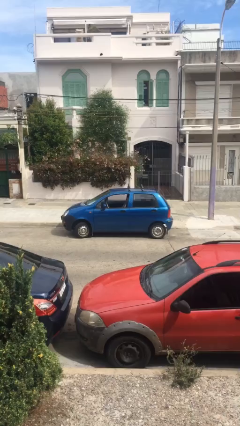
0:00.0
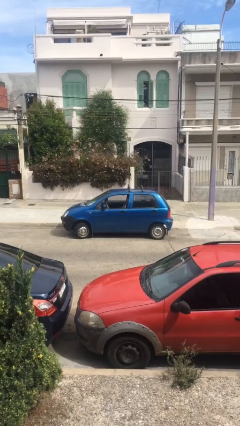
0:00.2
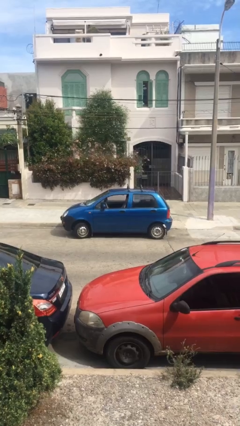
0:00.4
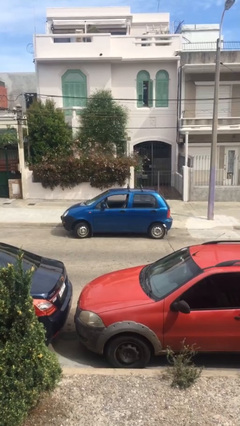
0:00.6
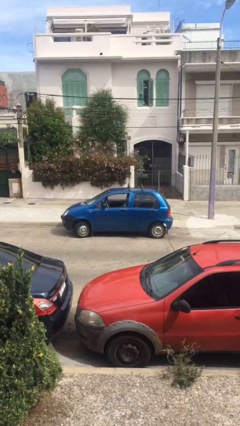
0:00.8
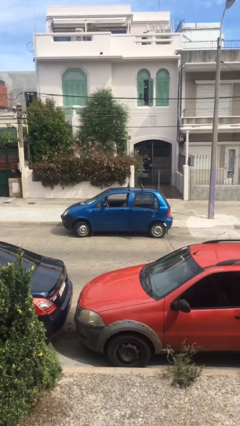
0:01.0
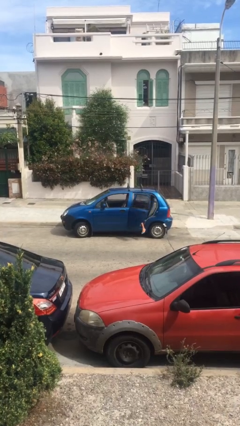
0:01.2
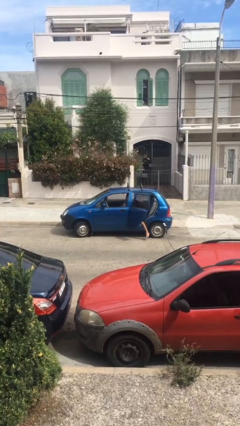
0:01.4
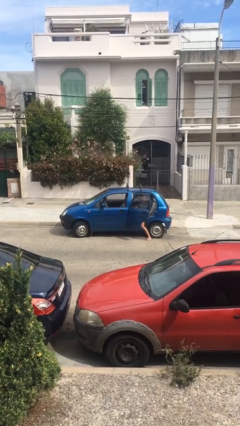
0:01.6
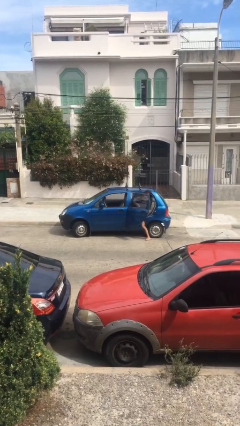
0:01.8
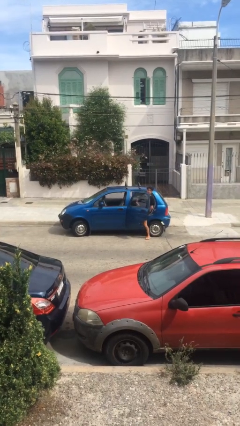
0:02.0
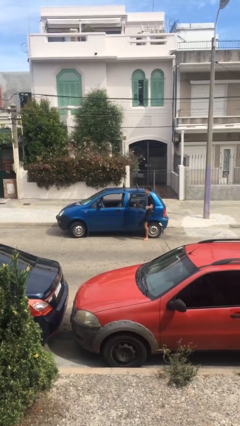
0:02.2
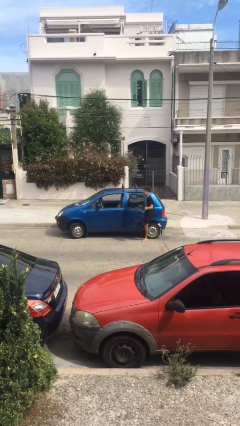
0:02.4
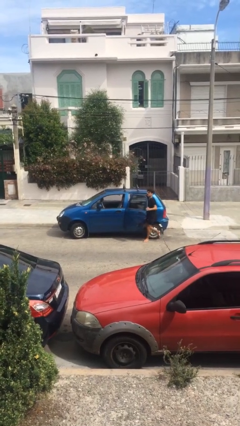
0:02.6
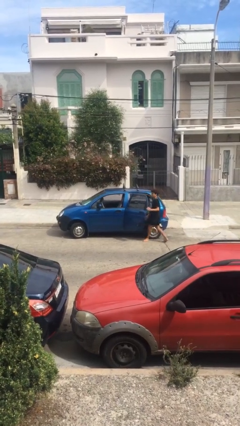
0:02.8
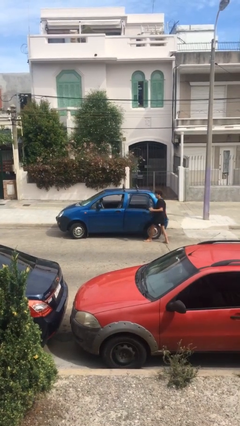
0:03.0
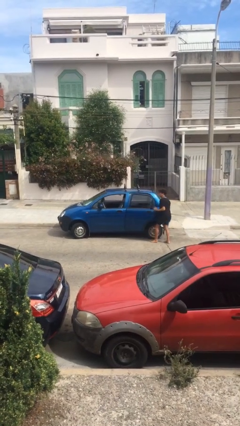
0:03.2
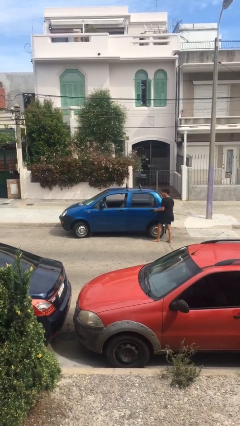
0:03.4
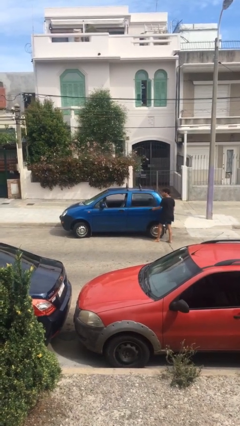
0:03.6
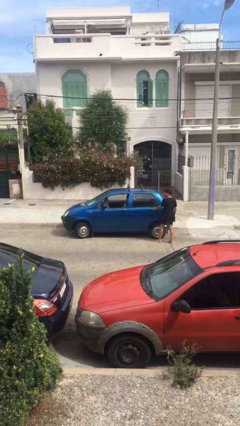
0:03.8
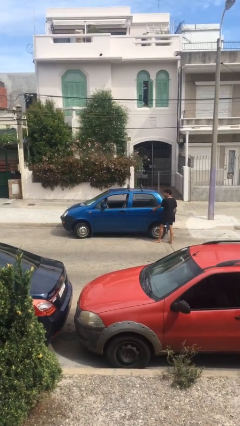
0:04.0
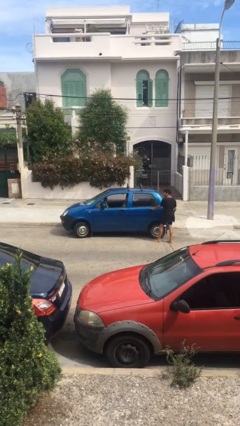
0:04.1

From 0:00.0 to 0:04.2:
car drops off person

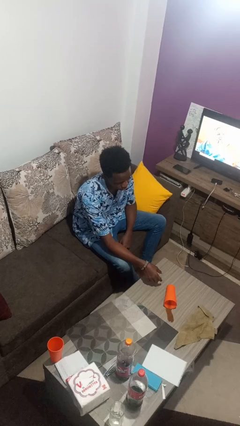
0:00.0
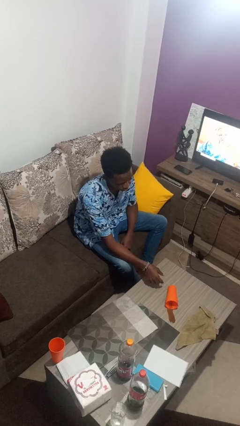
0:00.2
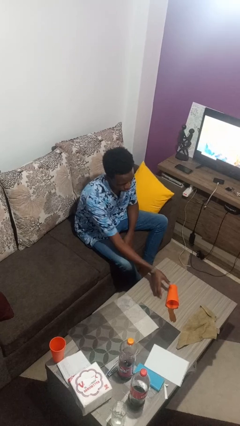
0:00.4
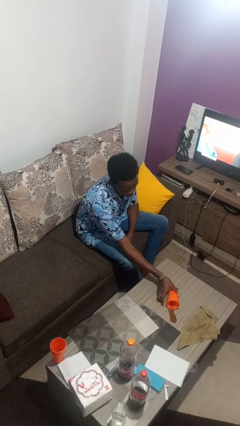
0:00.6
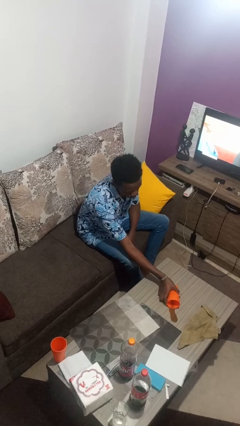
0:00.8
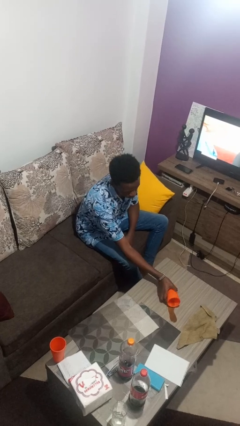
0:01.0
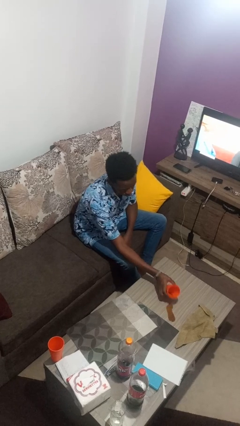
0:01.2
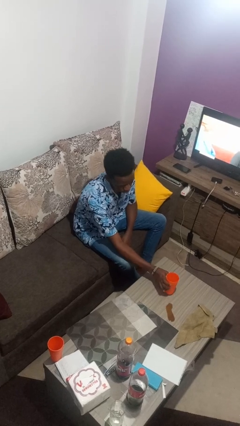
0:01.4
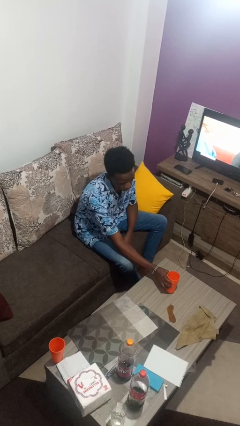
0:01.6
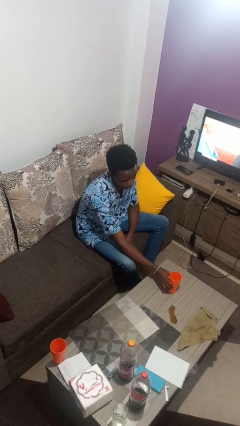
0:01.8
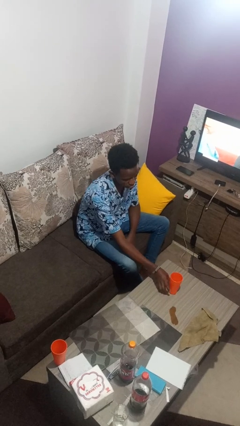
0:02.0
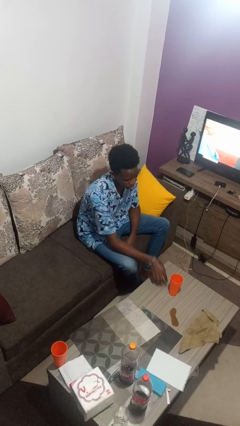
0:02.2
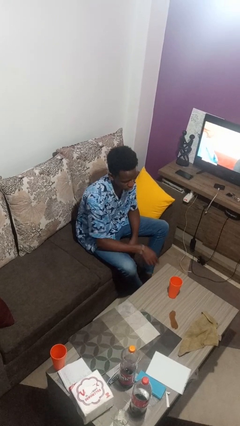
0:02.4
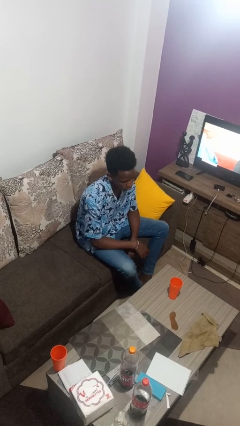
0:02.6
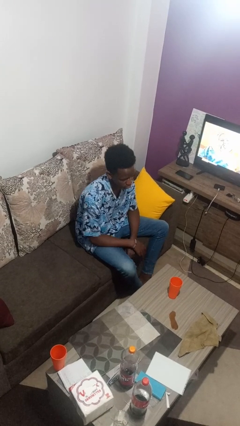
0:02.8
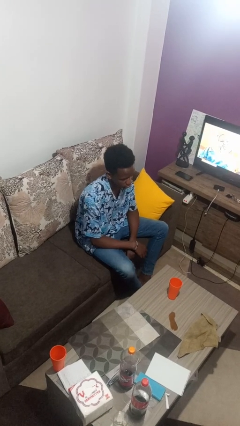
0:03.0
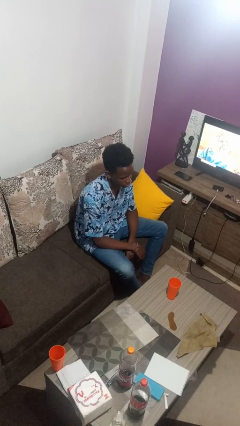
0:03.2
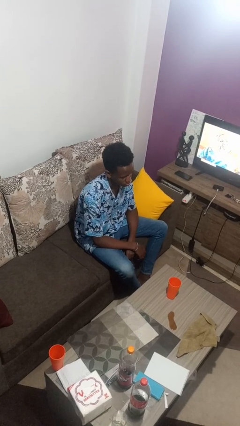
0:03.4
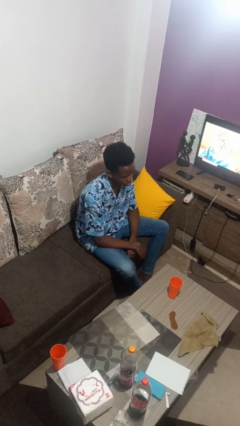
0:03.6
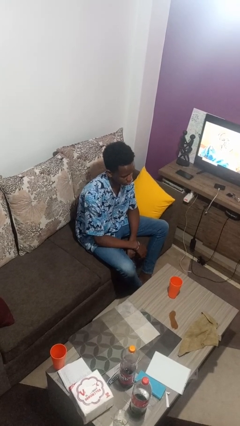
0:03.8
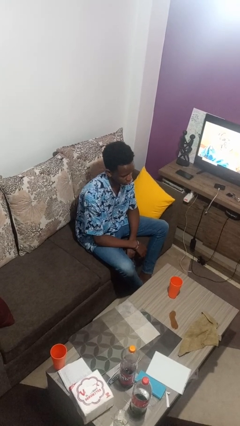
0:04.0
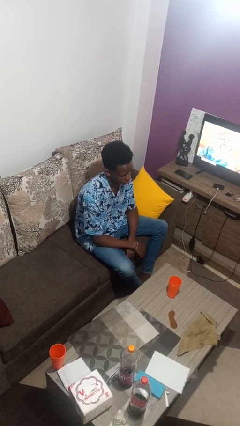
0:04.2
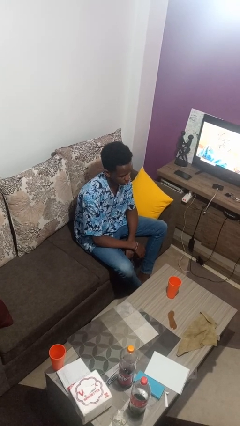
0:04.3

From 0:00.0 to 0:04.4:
person sets upright glass

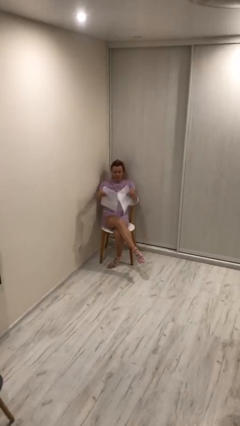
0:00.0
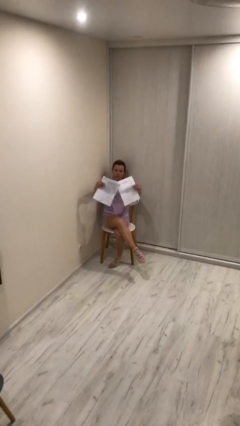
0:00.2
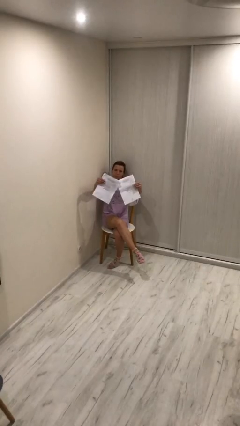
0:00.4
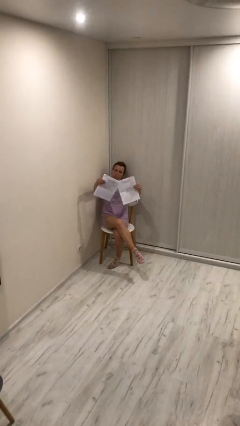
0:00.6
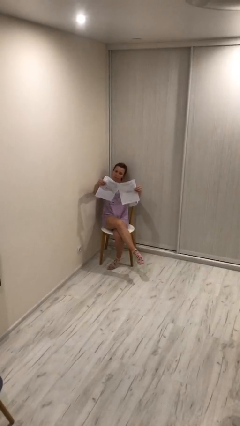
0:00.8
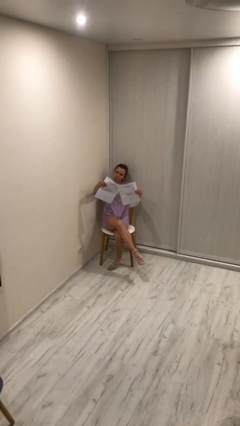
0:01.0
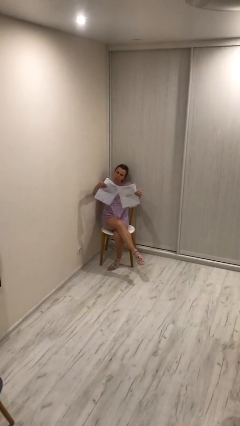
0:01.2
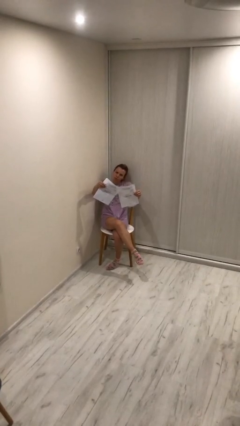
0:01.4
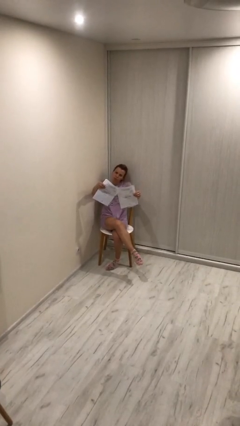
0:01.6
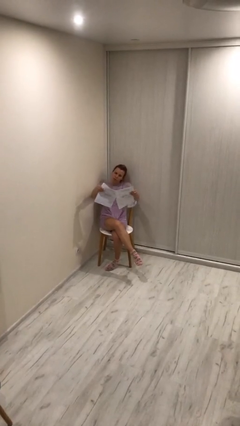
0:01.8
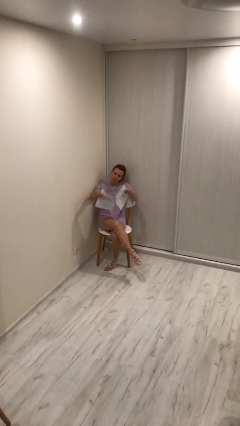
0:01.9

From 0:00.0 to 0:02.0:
person reads newspaper

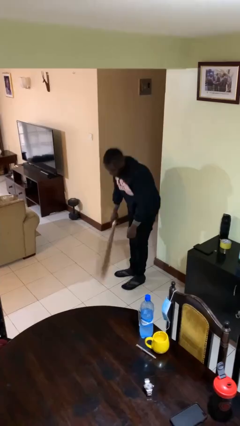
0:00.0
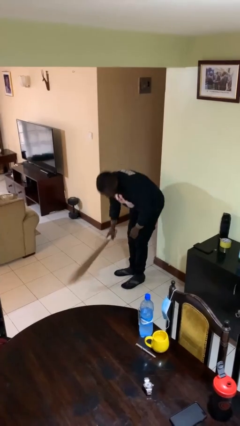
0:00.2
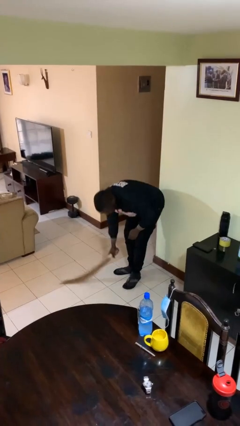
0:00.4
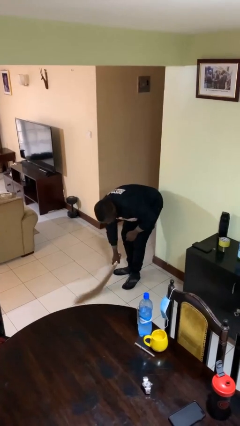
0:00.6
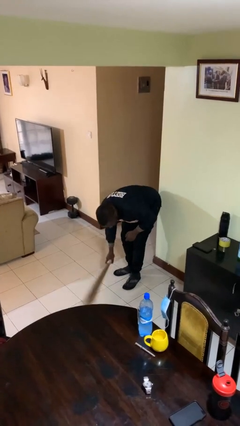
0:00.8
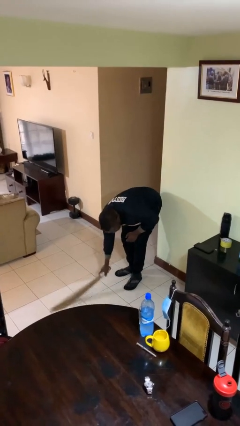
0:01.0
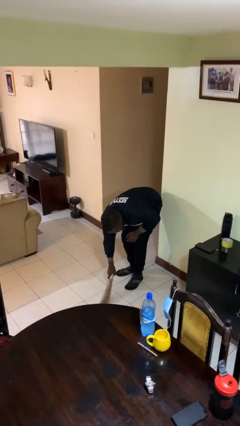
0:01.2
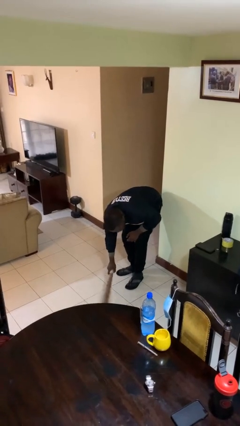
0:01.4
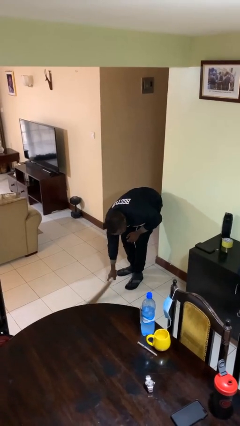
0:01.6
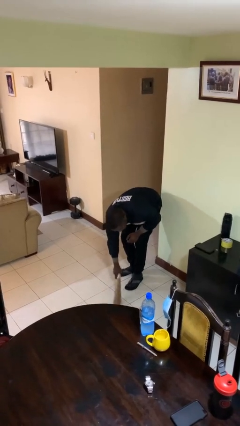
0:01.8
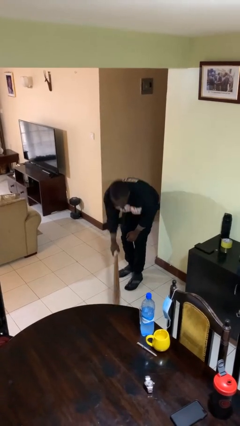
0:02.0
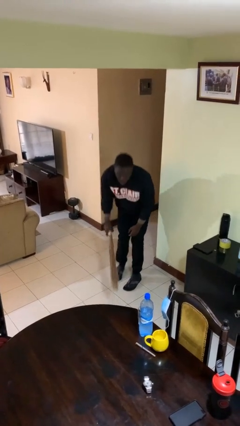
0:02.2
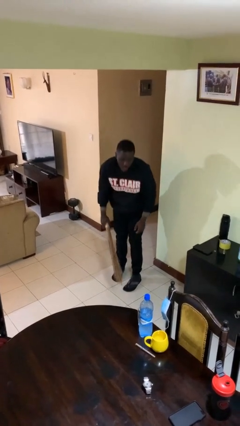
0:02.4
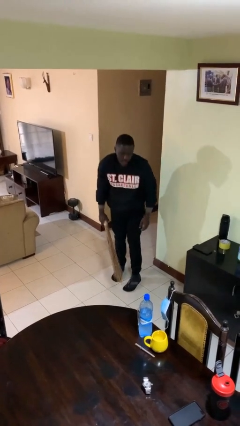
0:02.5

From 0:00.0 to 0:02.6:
person sweeps floor

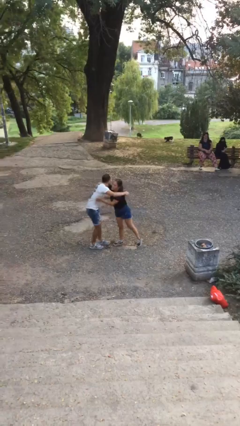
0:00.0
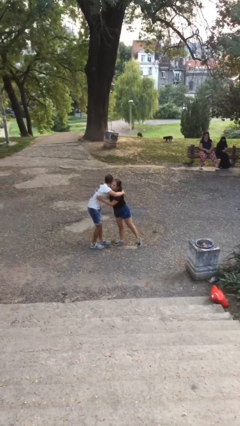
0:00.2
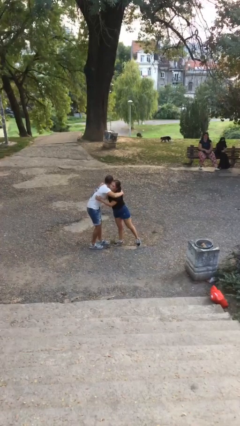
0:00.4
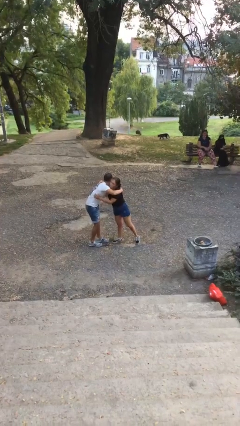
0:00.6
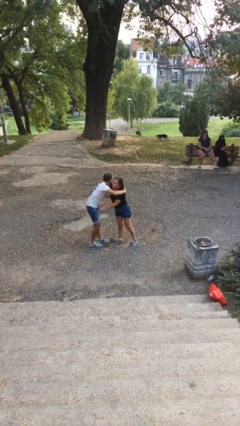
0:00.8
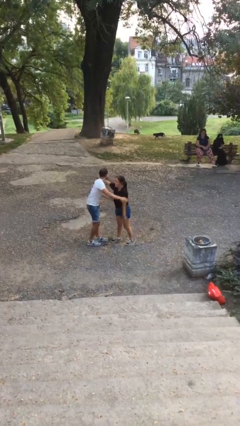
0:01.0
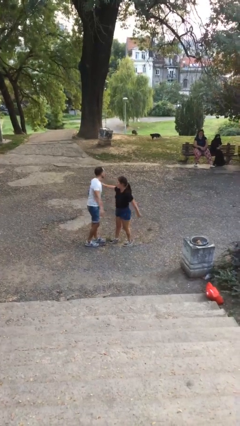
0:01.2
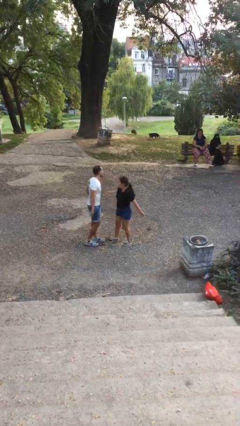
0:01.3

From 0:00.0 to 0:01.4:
person embraces person

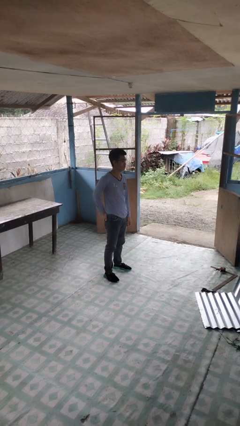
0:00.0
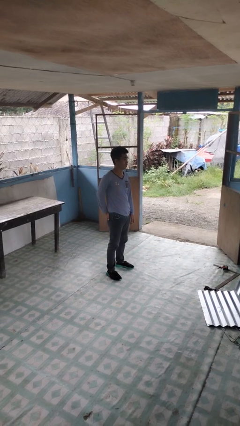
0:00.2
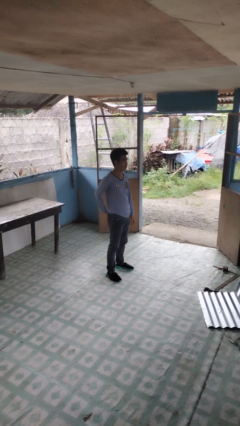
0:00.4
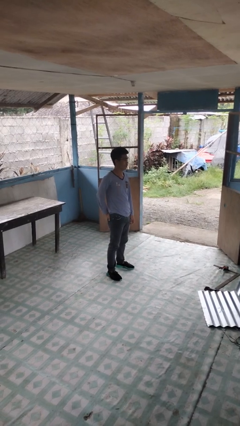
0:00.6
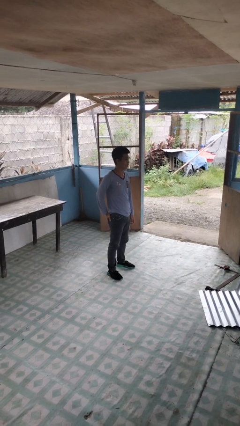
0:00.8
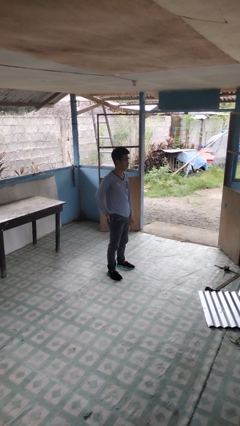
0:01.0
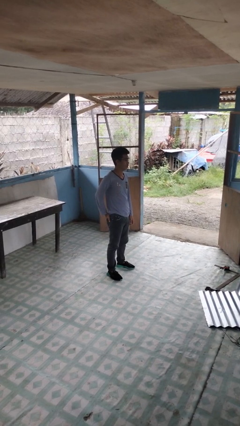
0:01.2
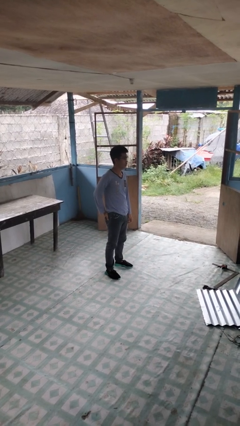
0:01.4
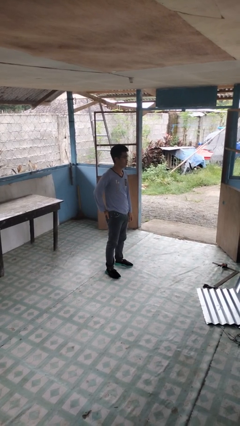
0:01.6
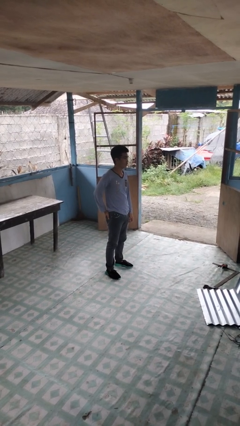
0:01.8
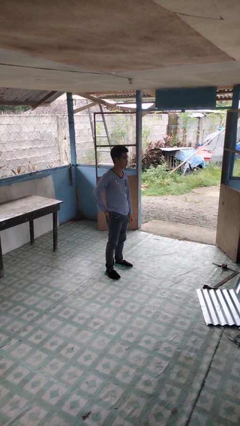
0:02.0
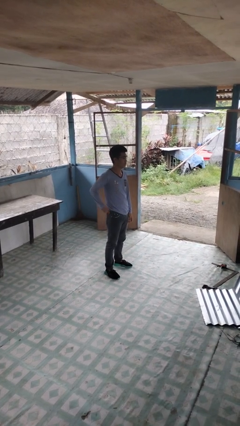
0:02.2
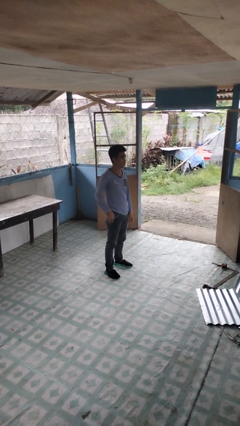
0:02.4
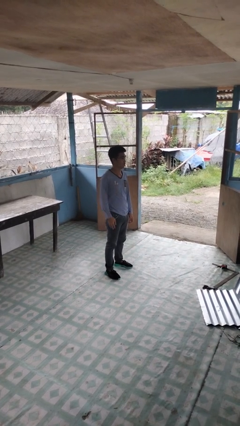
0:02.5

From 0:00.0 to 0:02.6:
person puts hands in back pockets

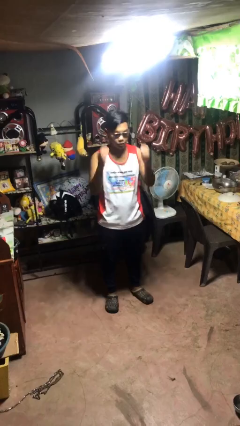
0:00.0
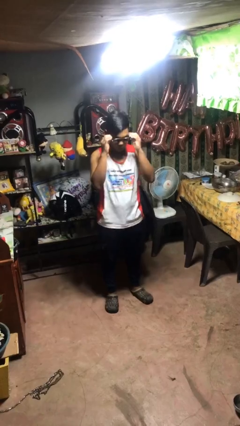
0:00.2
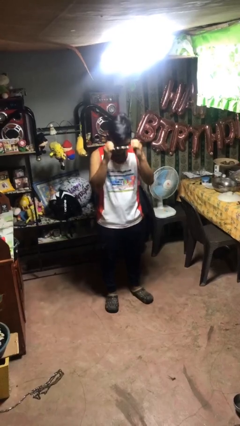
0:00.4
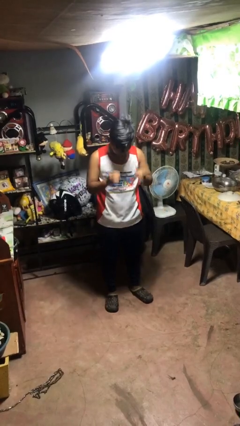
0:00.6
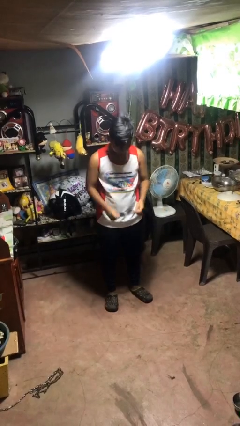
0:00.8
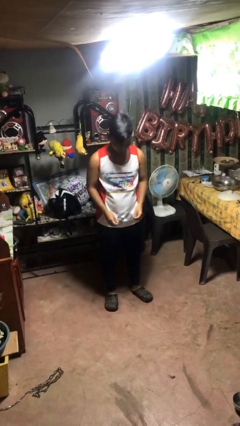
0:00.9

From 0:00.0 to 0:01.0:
person takes off sunglasses
